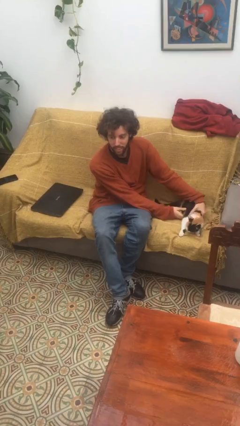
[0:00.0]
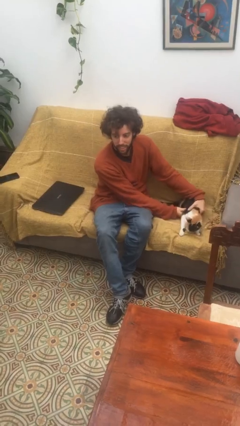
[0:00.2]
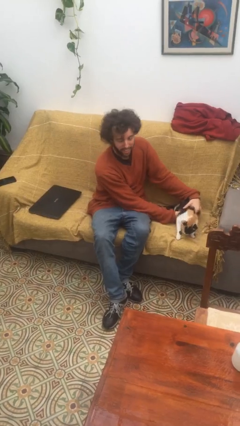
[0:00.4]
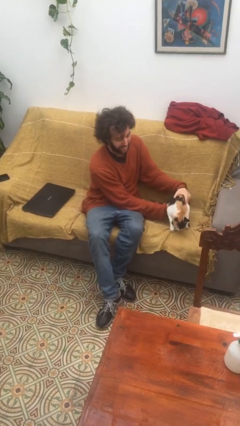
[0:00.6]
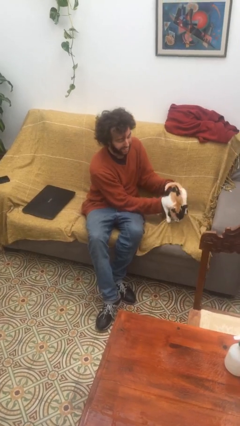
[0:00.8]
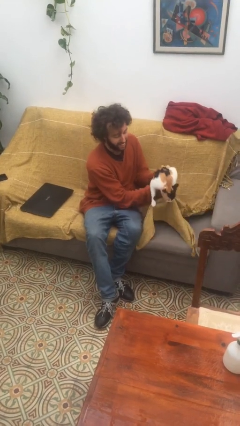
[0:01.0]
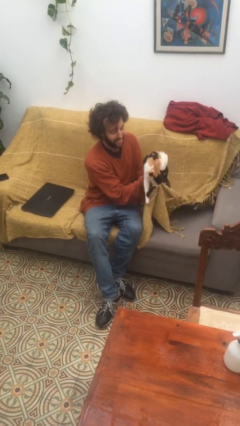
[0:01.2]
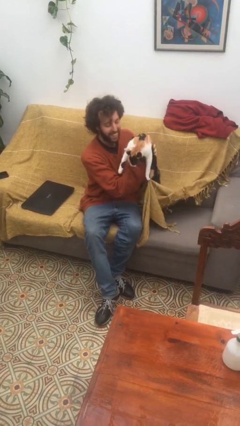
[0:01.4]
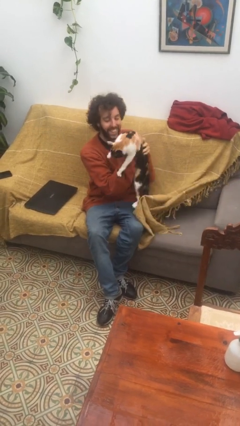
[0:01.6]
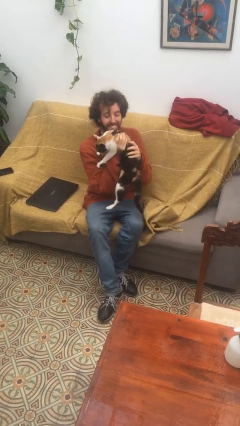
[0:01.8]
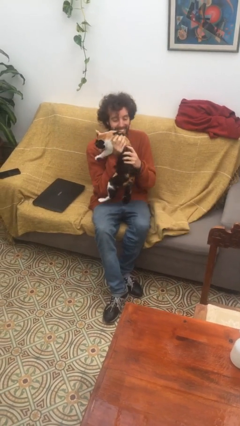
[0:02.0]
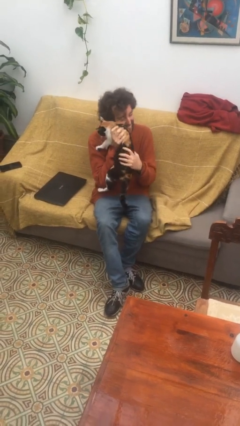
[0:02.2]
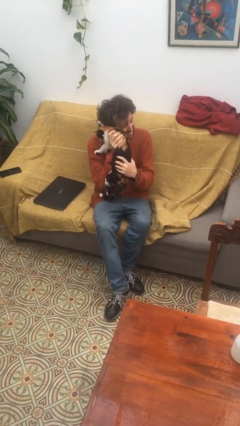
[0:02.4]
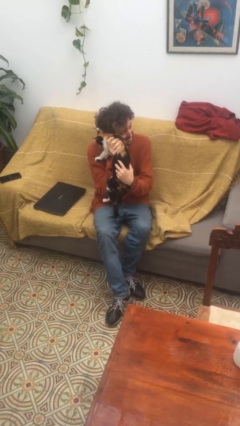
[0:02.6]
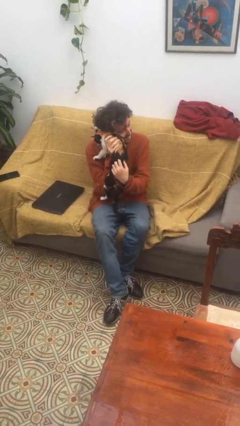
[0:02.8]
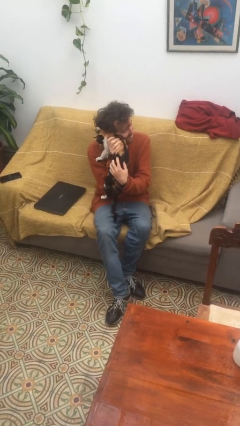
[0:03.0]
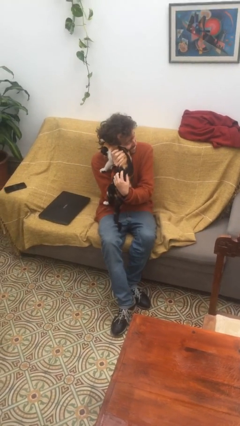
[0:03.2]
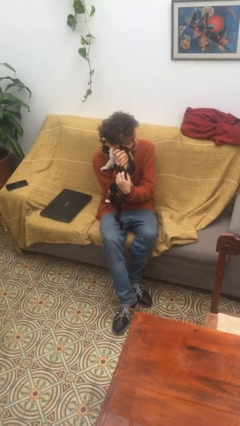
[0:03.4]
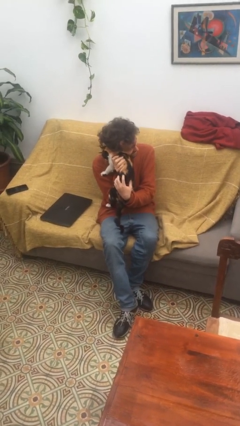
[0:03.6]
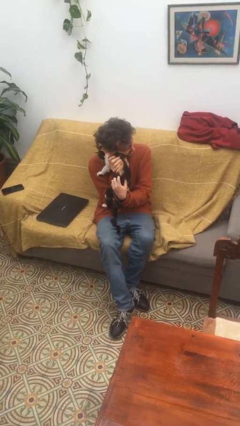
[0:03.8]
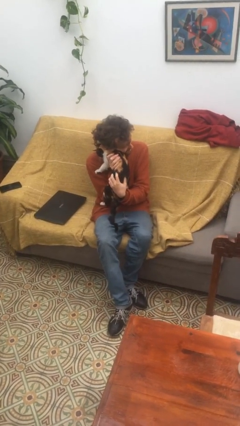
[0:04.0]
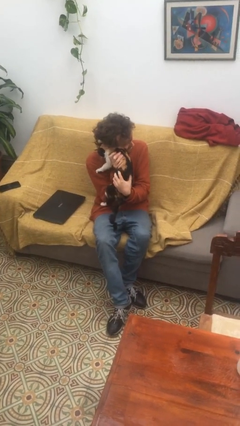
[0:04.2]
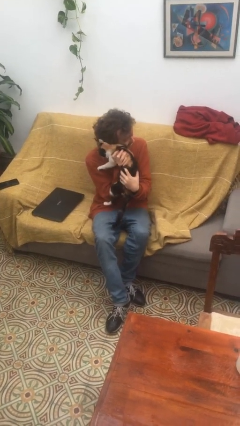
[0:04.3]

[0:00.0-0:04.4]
person hugs cat

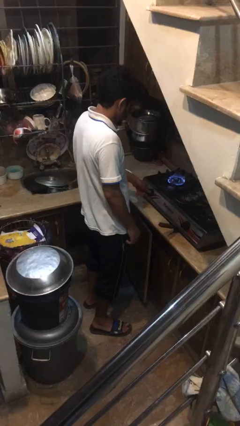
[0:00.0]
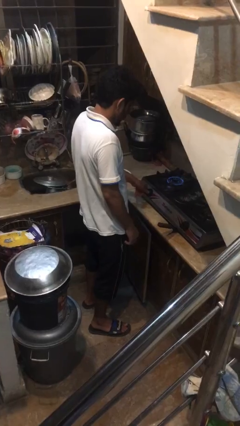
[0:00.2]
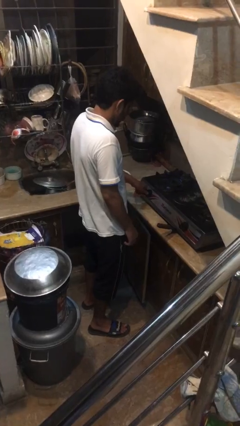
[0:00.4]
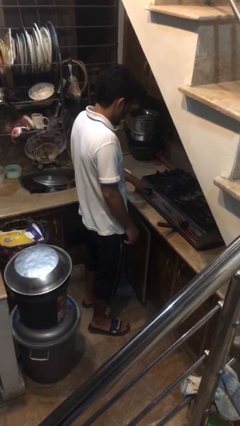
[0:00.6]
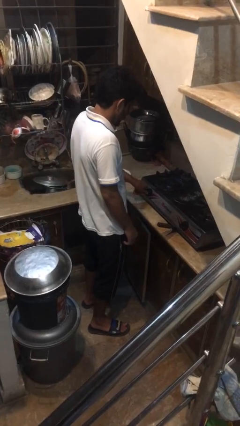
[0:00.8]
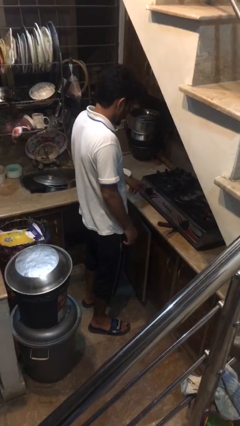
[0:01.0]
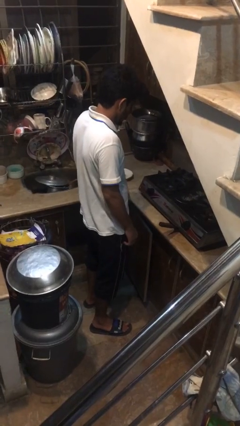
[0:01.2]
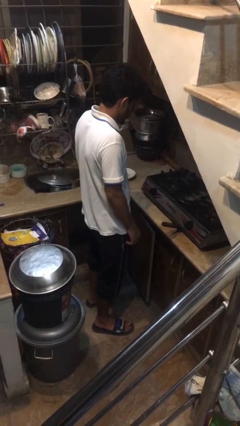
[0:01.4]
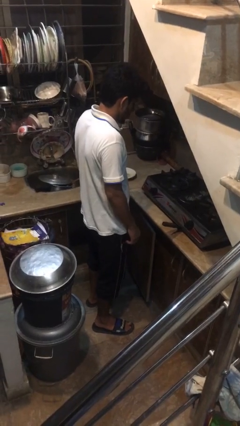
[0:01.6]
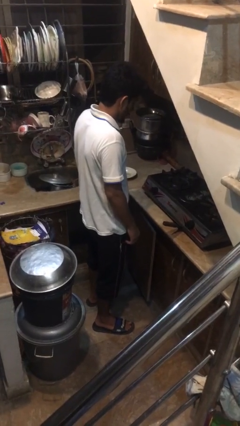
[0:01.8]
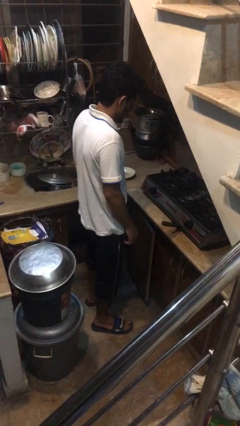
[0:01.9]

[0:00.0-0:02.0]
person turns off stovetop

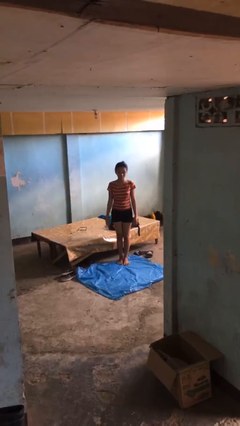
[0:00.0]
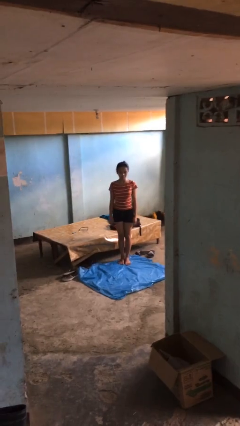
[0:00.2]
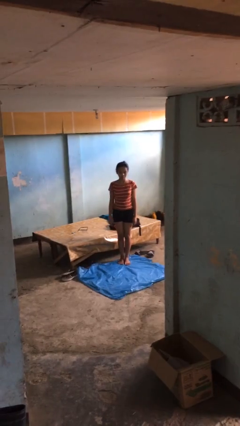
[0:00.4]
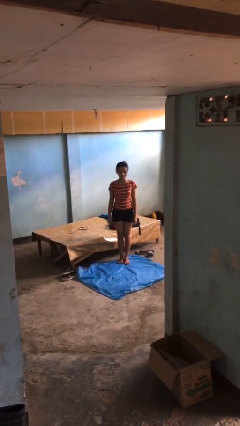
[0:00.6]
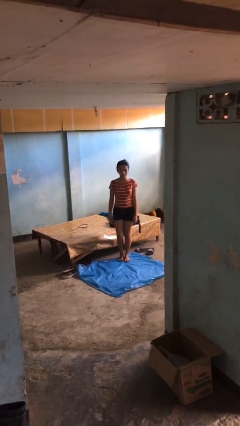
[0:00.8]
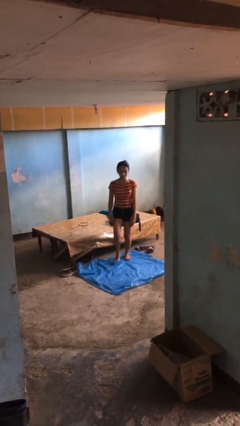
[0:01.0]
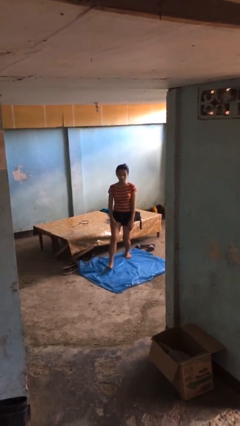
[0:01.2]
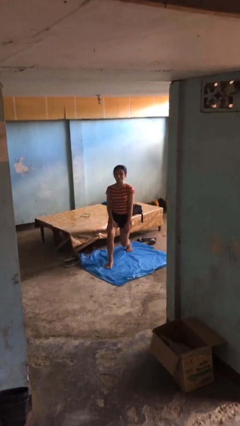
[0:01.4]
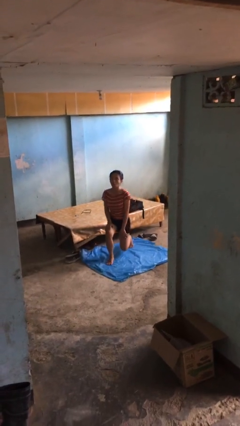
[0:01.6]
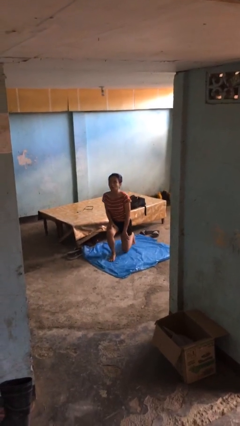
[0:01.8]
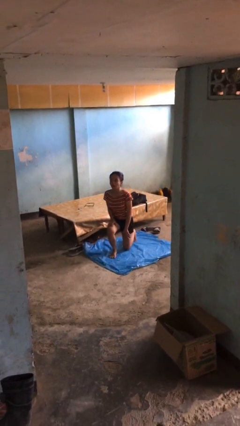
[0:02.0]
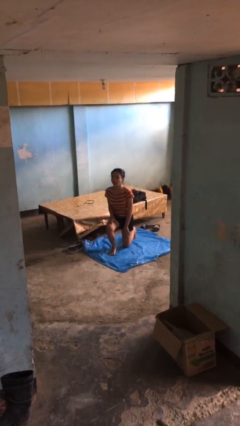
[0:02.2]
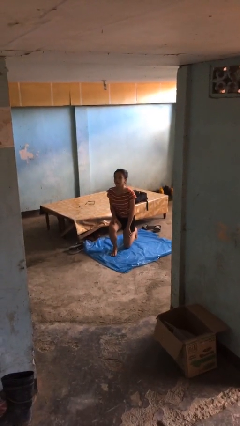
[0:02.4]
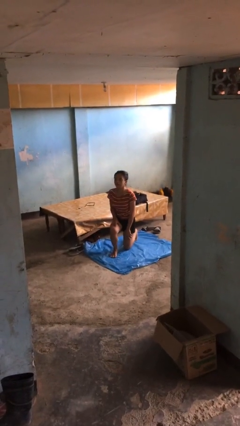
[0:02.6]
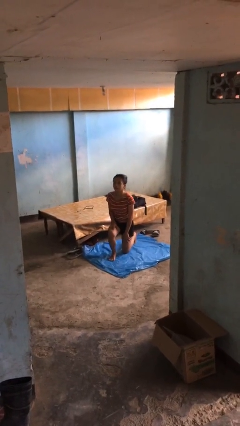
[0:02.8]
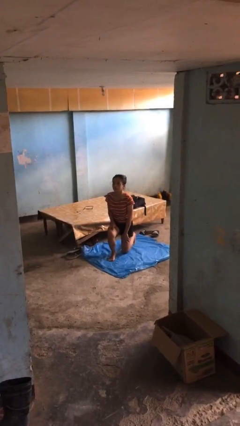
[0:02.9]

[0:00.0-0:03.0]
person kneels

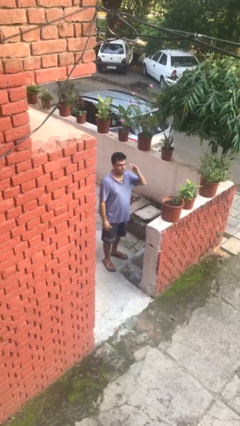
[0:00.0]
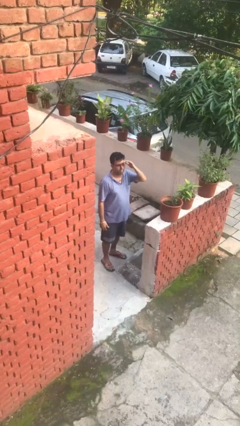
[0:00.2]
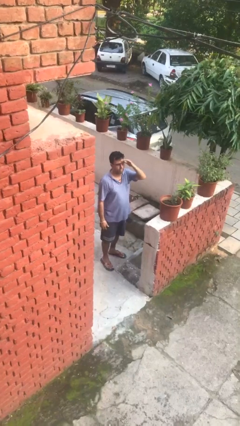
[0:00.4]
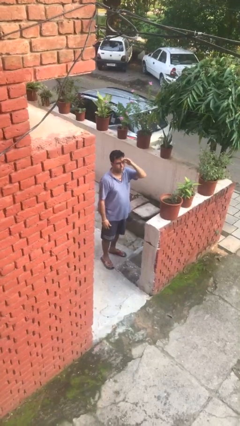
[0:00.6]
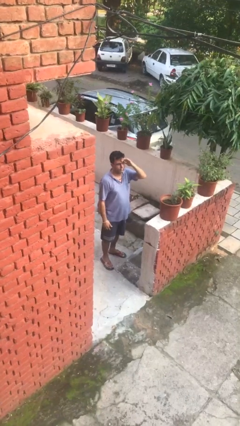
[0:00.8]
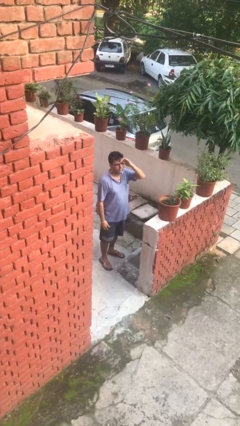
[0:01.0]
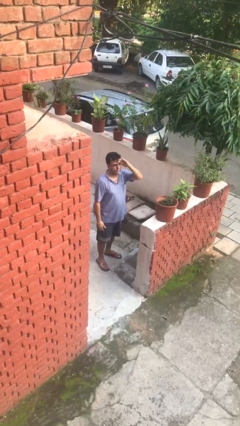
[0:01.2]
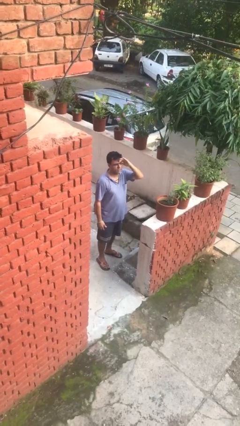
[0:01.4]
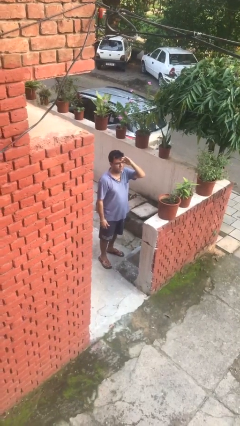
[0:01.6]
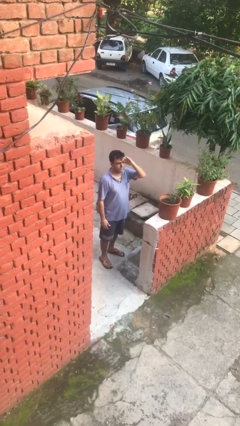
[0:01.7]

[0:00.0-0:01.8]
person shades eyes

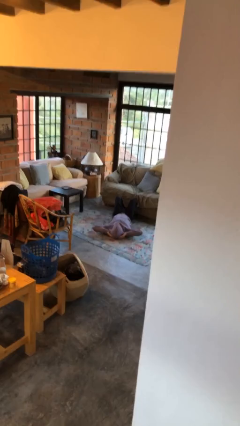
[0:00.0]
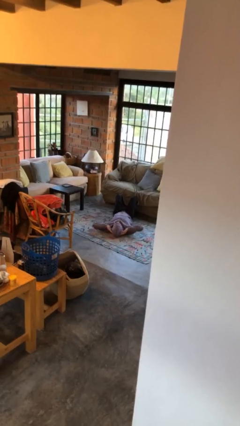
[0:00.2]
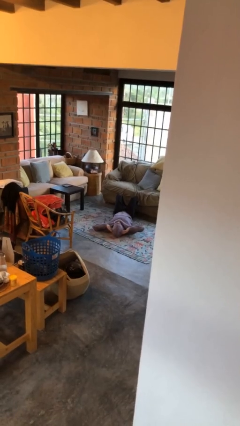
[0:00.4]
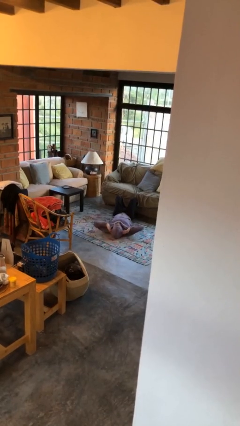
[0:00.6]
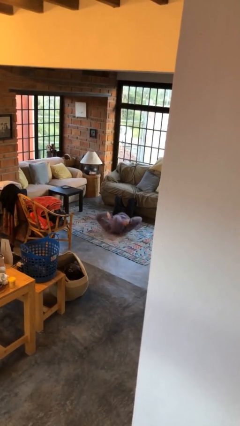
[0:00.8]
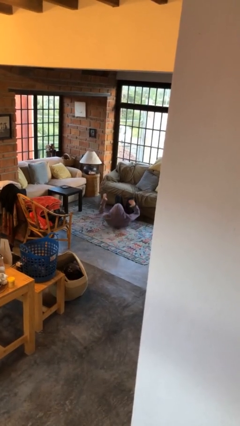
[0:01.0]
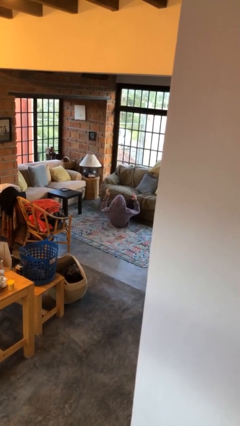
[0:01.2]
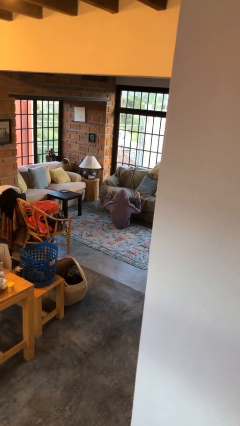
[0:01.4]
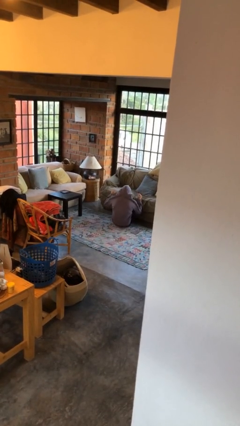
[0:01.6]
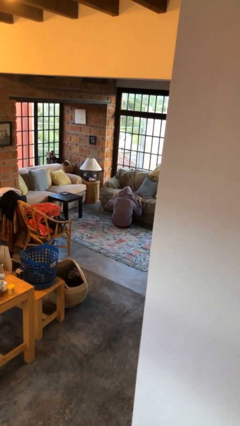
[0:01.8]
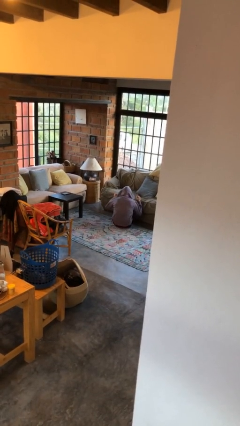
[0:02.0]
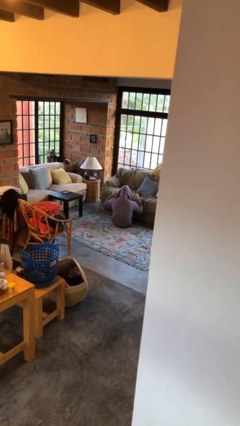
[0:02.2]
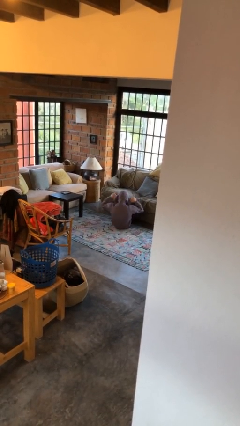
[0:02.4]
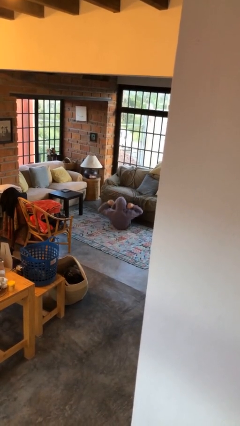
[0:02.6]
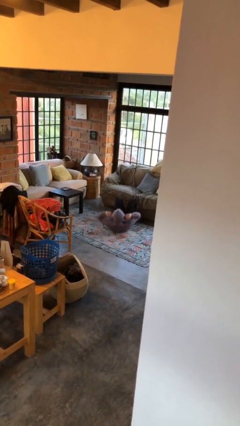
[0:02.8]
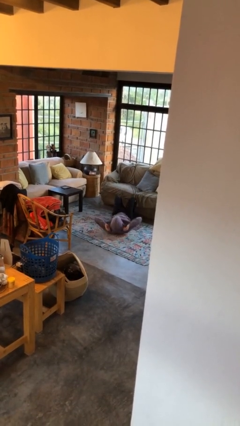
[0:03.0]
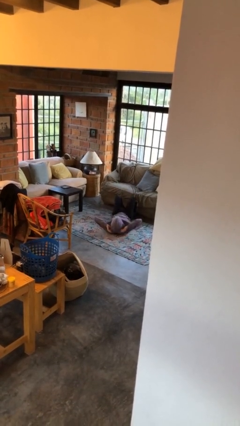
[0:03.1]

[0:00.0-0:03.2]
person exercises with situp

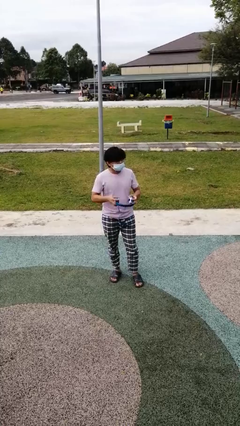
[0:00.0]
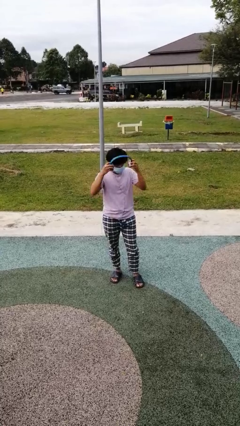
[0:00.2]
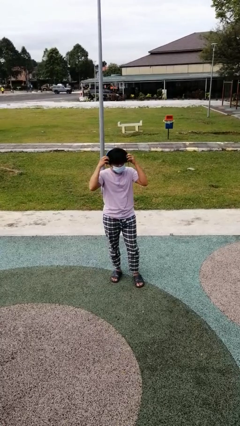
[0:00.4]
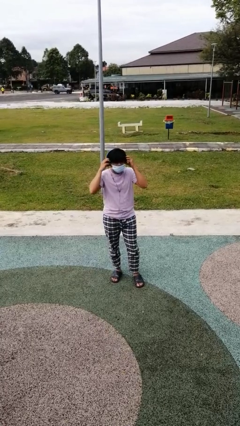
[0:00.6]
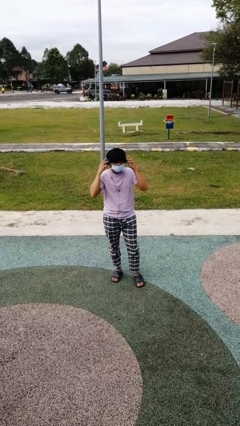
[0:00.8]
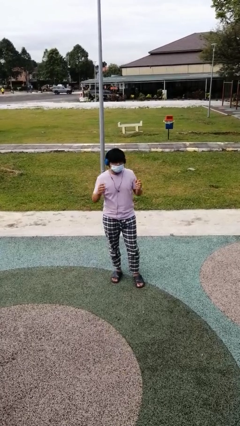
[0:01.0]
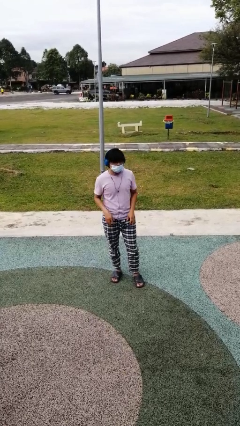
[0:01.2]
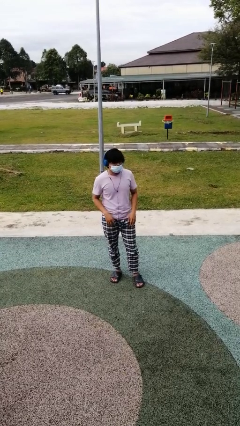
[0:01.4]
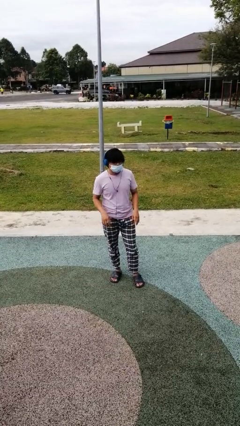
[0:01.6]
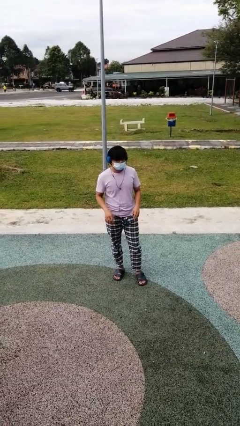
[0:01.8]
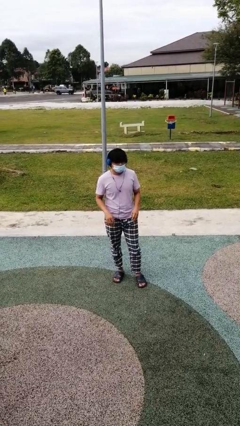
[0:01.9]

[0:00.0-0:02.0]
person puts on headphones

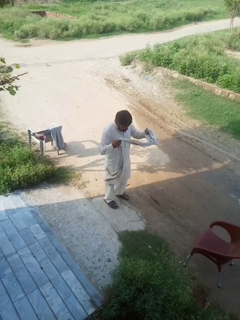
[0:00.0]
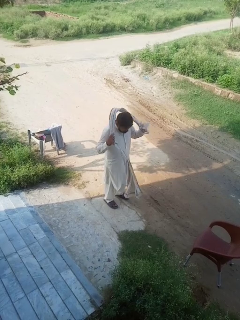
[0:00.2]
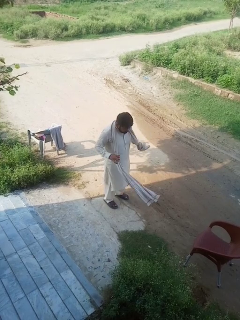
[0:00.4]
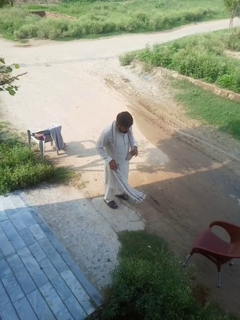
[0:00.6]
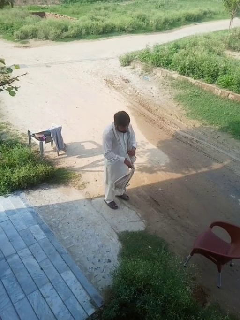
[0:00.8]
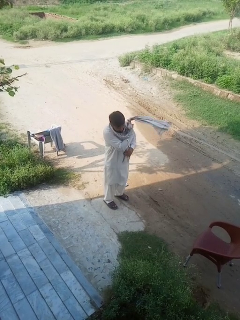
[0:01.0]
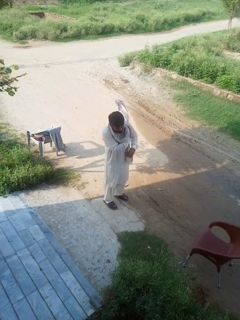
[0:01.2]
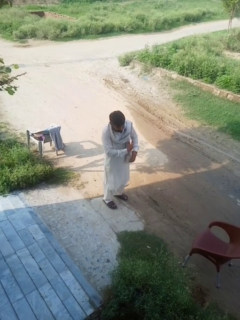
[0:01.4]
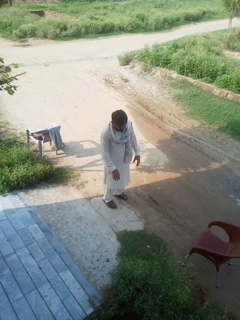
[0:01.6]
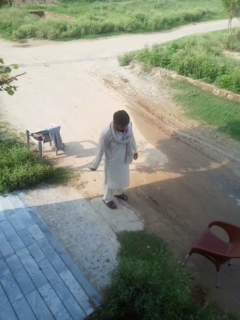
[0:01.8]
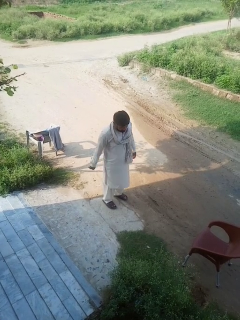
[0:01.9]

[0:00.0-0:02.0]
person puts on scarf
